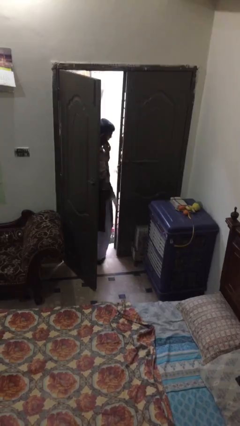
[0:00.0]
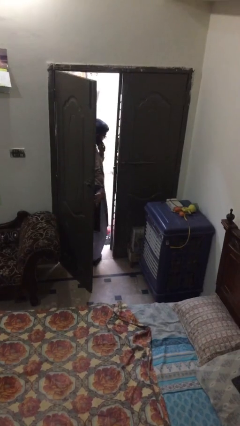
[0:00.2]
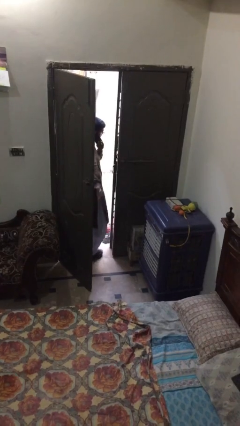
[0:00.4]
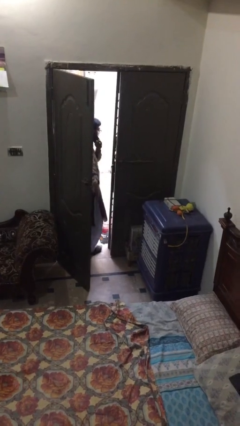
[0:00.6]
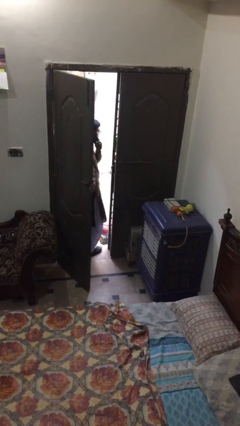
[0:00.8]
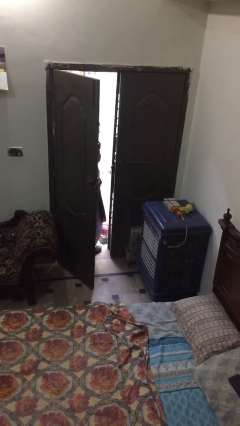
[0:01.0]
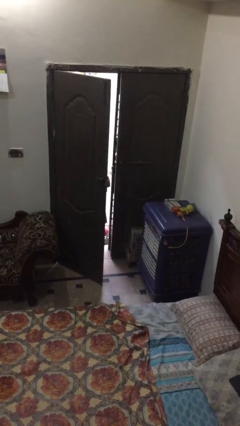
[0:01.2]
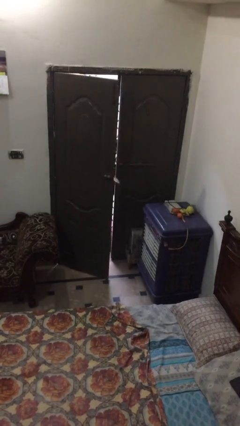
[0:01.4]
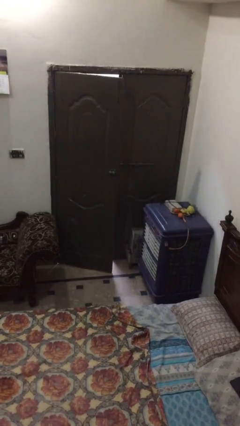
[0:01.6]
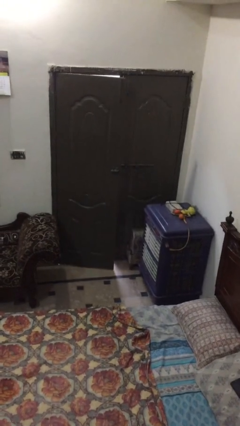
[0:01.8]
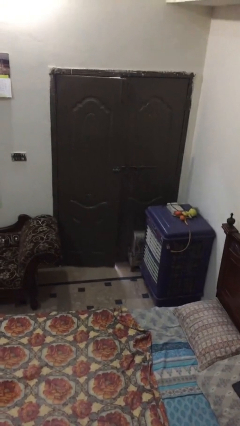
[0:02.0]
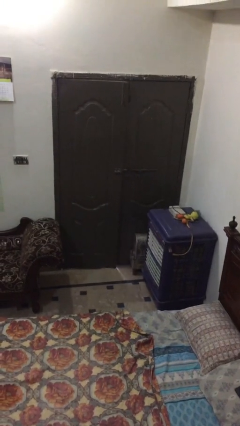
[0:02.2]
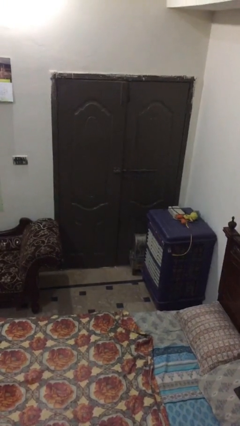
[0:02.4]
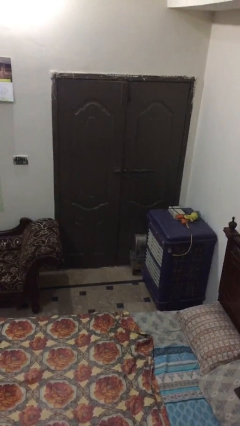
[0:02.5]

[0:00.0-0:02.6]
person closes facility door

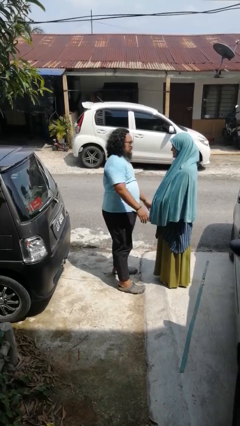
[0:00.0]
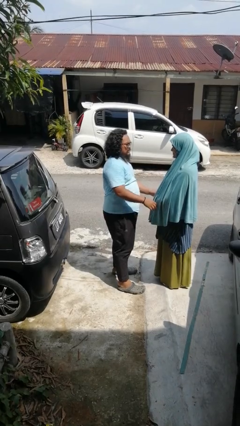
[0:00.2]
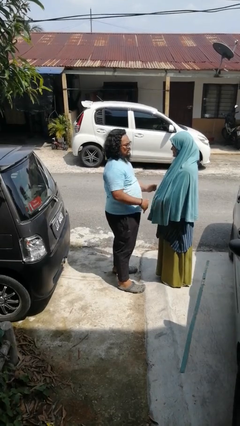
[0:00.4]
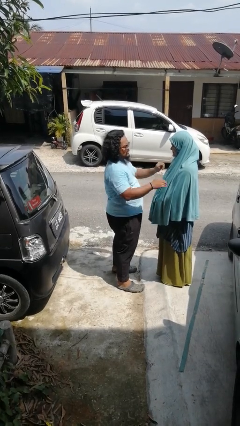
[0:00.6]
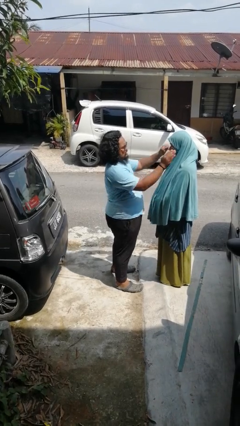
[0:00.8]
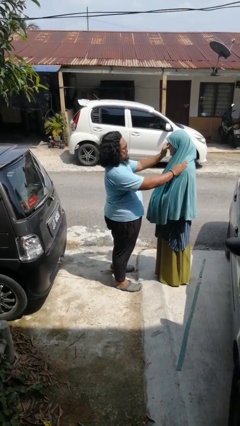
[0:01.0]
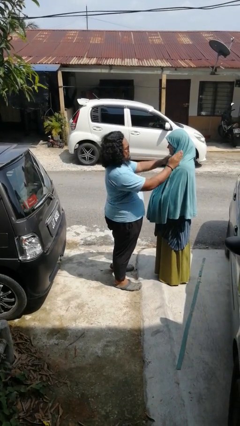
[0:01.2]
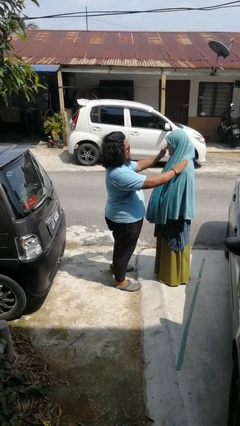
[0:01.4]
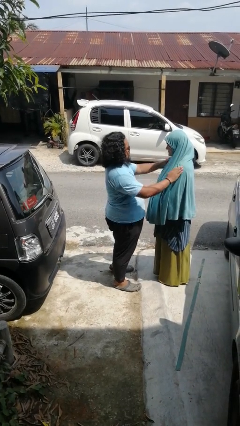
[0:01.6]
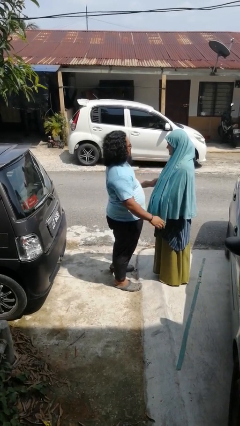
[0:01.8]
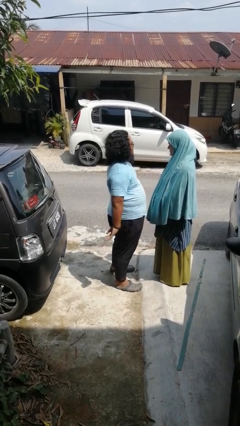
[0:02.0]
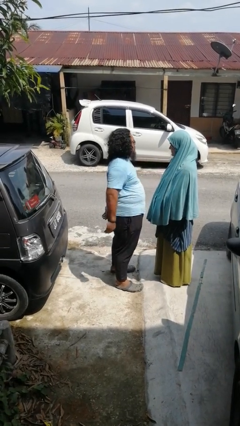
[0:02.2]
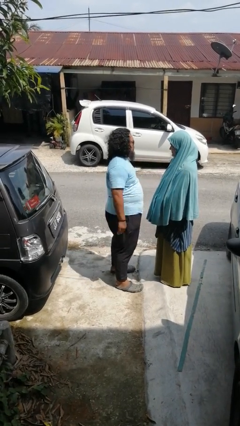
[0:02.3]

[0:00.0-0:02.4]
person pounds shoulders of person

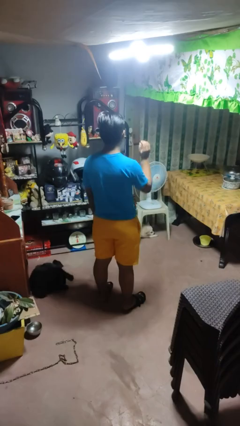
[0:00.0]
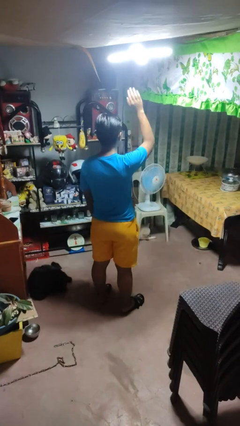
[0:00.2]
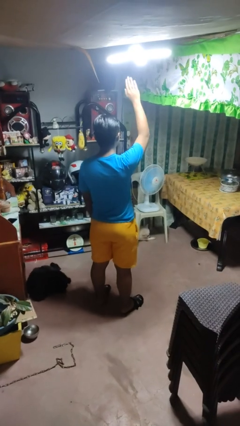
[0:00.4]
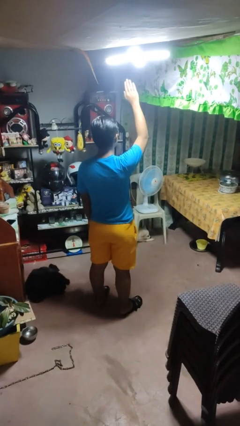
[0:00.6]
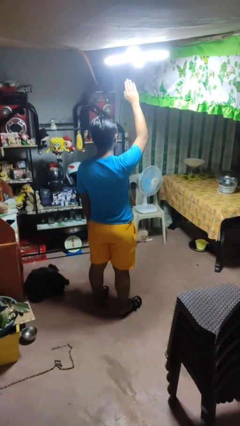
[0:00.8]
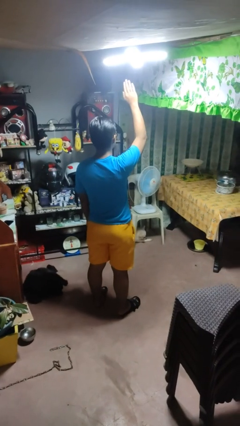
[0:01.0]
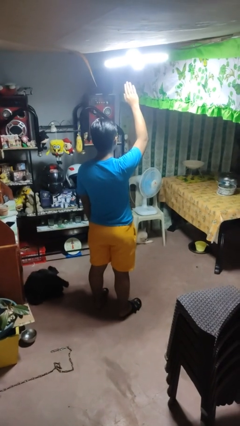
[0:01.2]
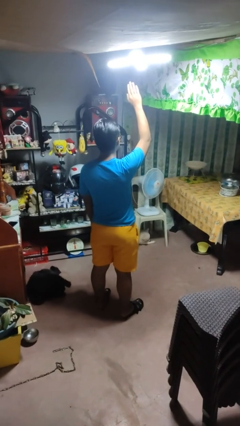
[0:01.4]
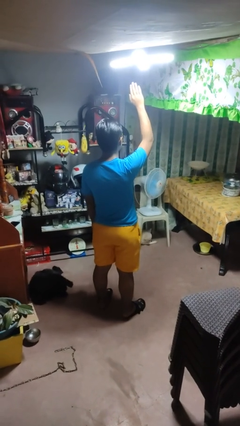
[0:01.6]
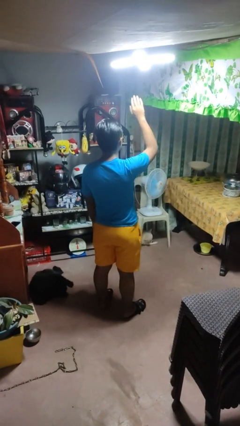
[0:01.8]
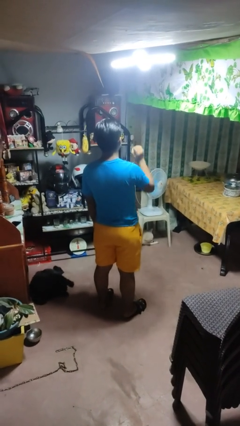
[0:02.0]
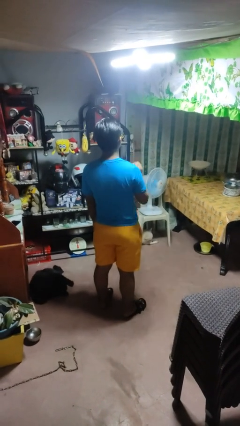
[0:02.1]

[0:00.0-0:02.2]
person gestures raise hand

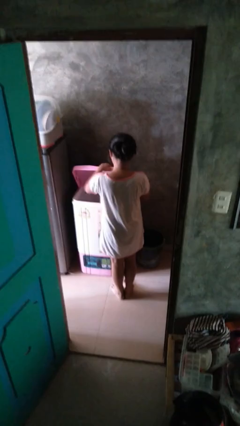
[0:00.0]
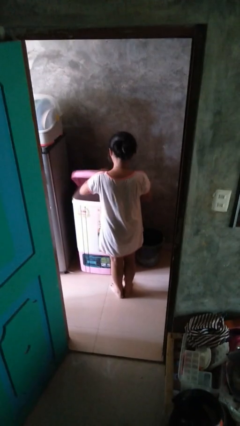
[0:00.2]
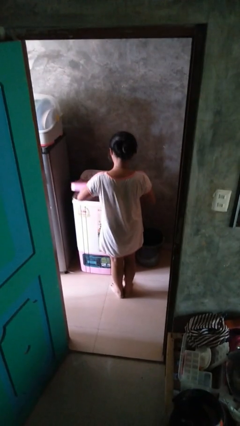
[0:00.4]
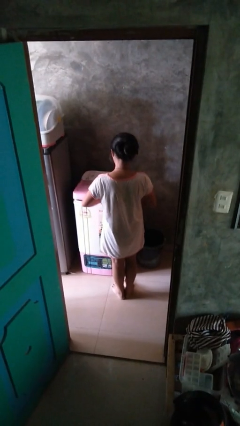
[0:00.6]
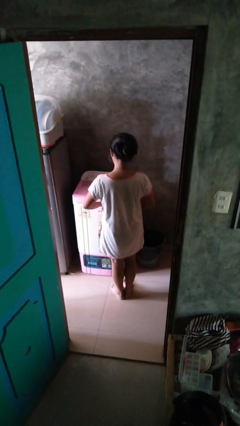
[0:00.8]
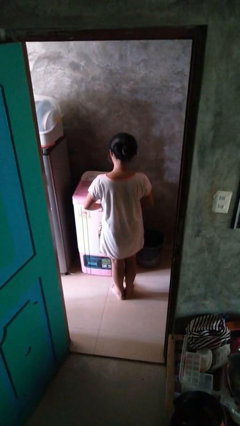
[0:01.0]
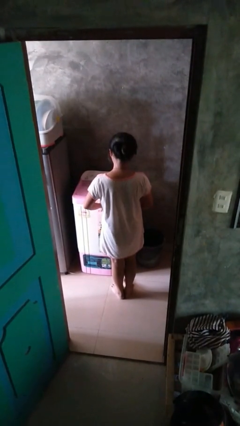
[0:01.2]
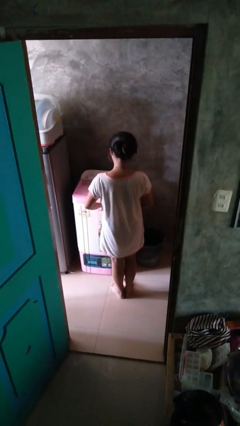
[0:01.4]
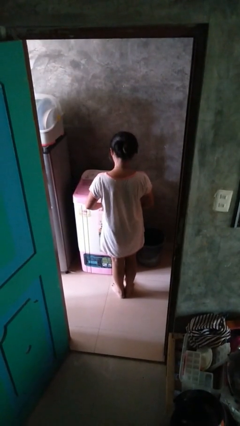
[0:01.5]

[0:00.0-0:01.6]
person closes clothes washer

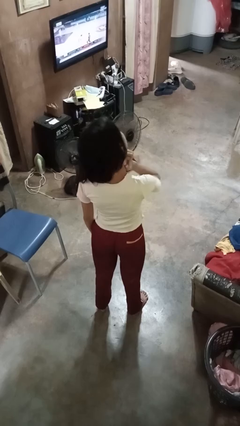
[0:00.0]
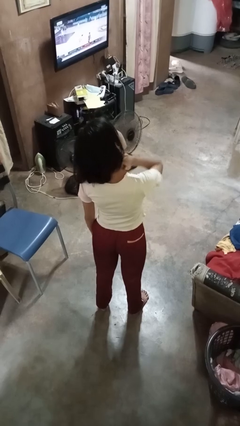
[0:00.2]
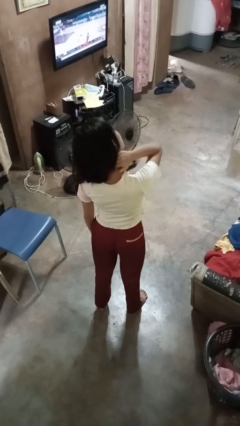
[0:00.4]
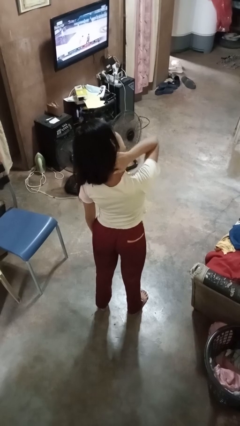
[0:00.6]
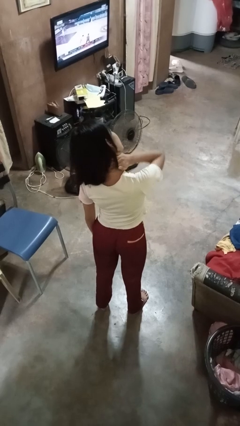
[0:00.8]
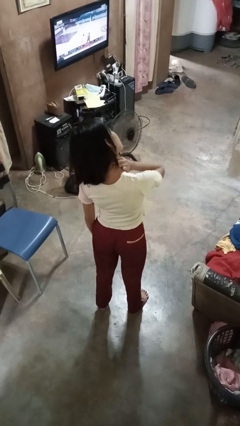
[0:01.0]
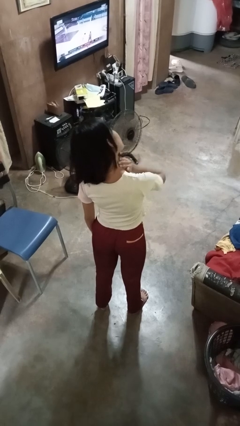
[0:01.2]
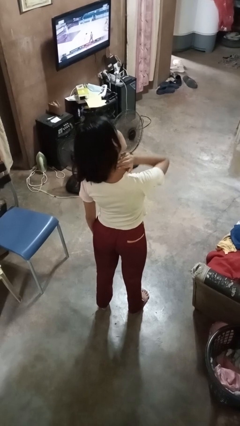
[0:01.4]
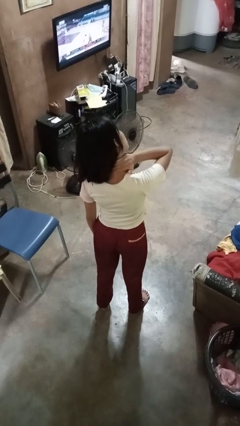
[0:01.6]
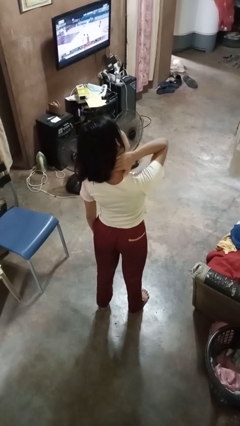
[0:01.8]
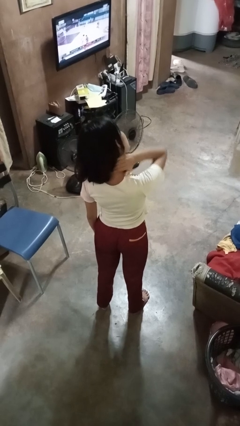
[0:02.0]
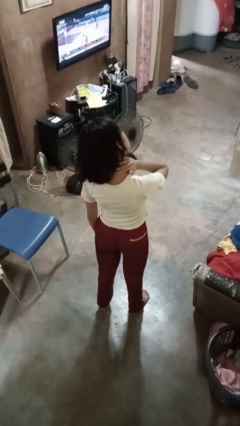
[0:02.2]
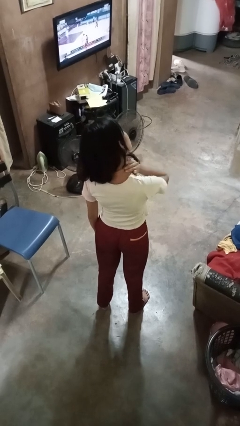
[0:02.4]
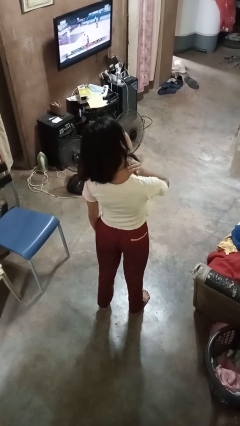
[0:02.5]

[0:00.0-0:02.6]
person rubs neck

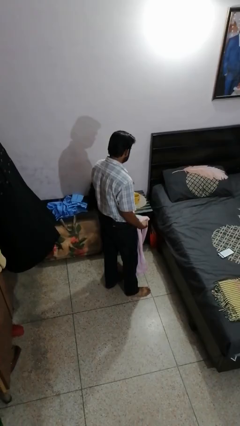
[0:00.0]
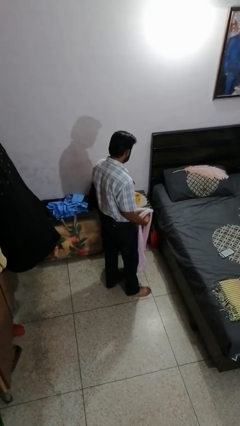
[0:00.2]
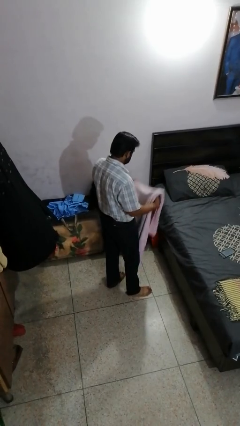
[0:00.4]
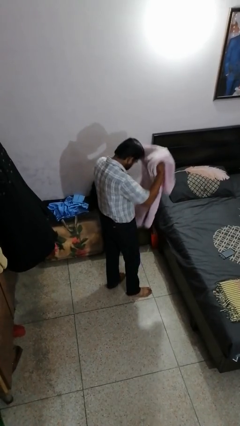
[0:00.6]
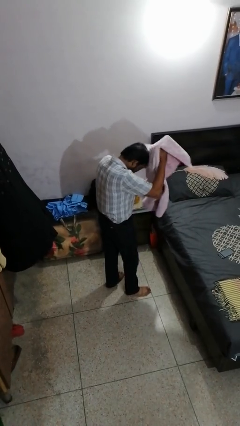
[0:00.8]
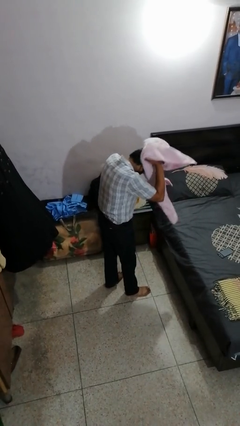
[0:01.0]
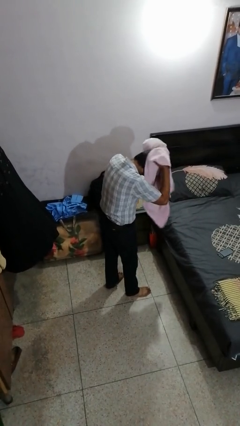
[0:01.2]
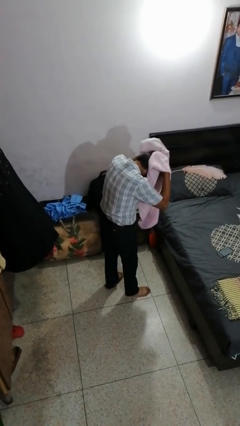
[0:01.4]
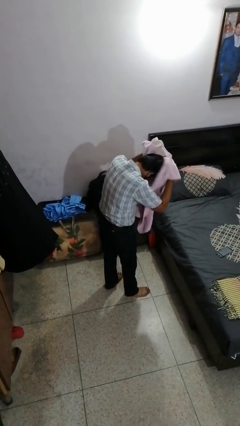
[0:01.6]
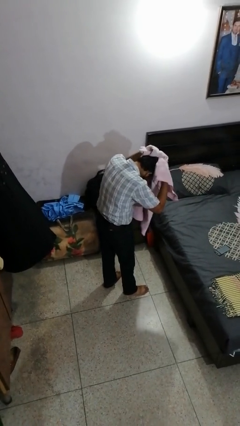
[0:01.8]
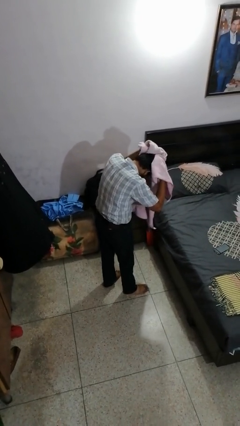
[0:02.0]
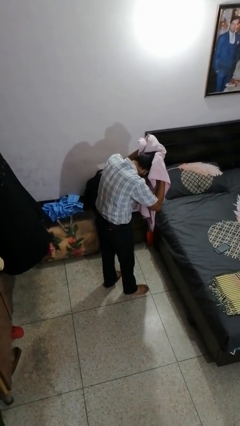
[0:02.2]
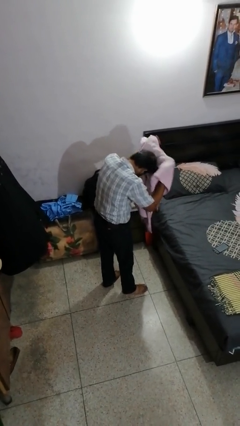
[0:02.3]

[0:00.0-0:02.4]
person dries hair with towel

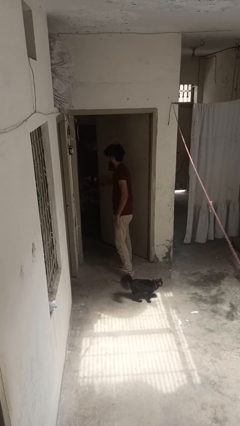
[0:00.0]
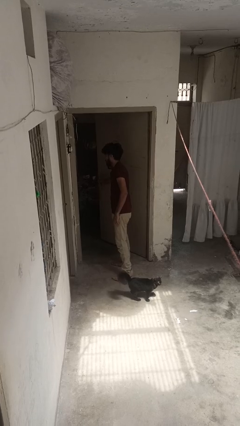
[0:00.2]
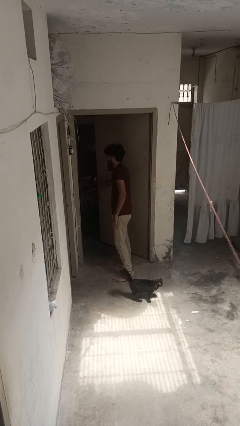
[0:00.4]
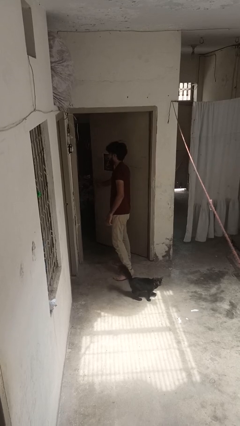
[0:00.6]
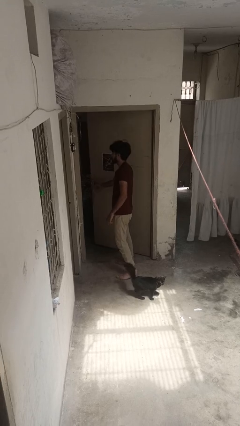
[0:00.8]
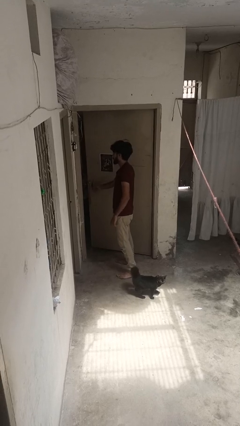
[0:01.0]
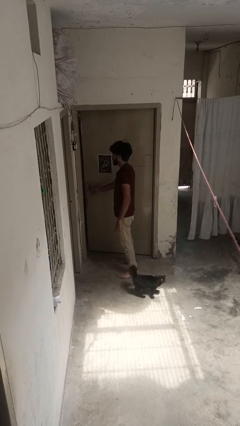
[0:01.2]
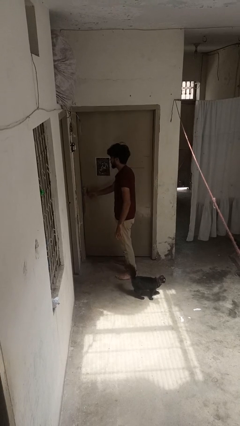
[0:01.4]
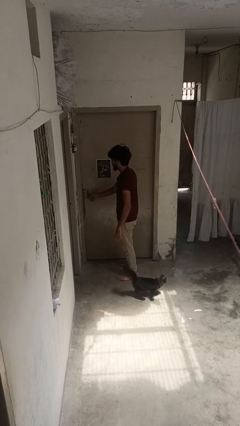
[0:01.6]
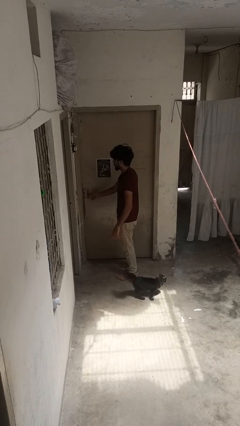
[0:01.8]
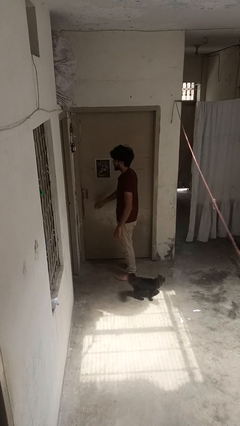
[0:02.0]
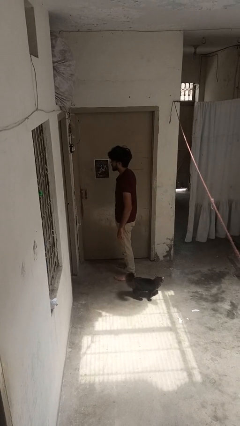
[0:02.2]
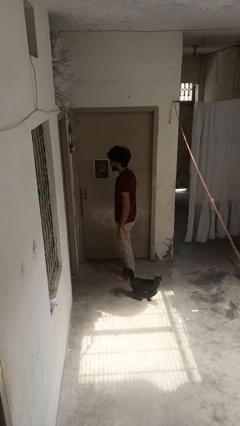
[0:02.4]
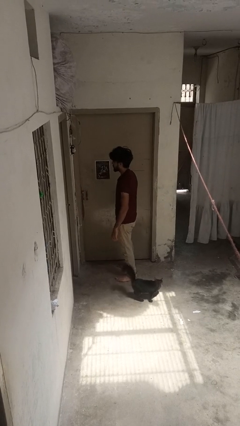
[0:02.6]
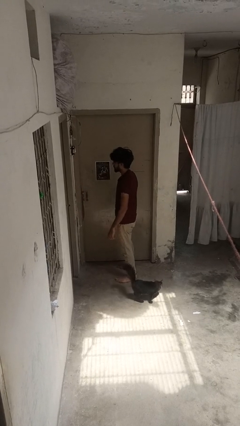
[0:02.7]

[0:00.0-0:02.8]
person closes door with hip
